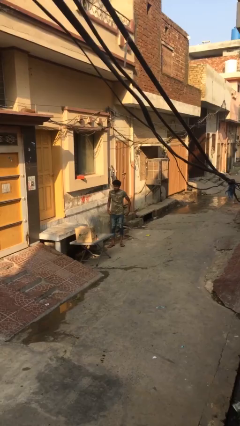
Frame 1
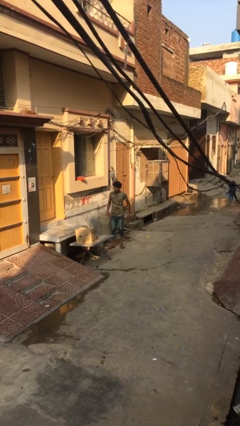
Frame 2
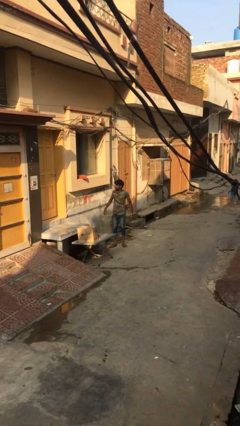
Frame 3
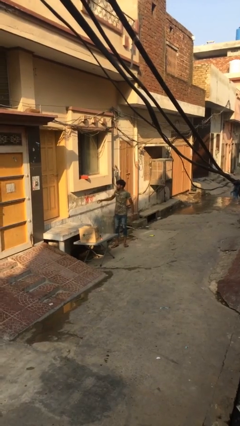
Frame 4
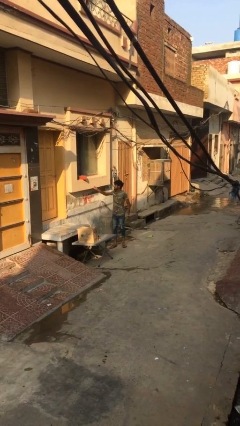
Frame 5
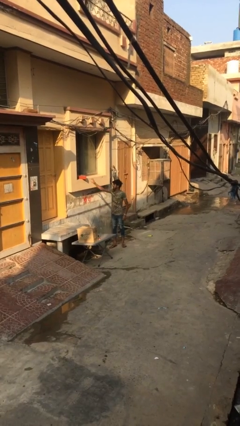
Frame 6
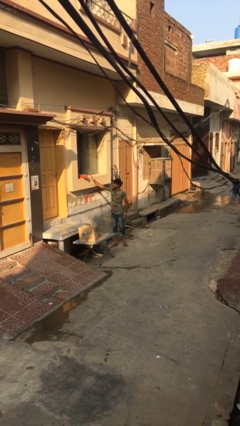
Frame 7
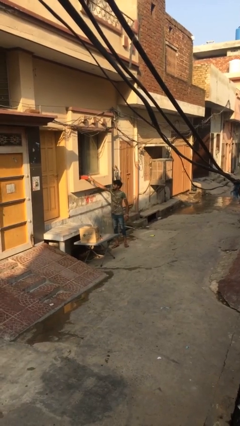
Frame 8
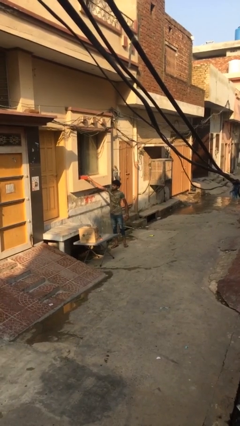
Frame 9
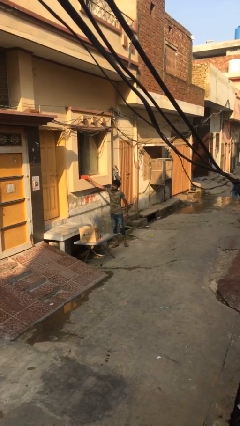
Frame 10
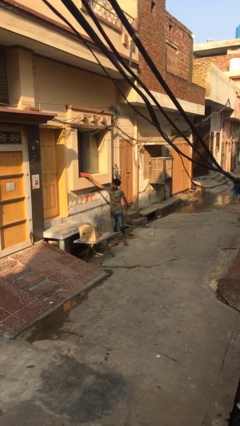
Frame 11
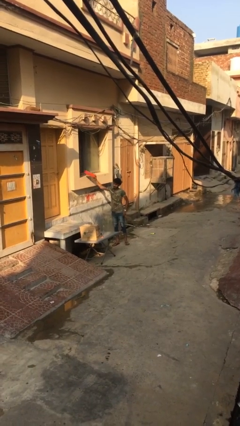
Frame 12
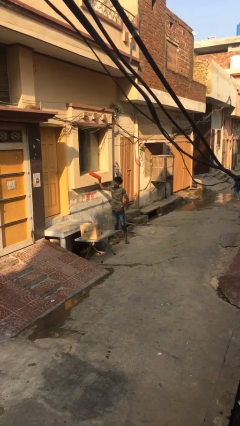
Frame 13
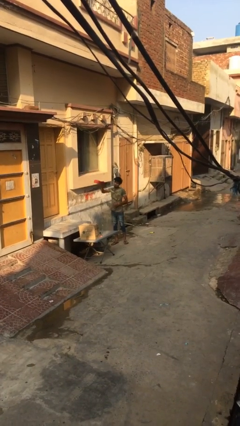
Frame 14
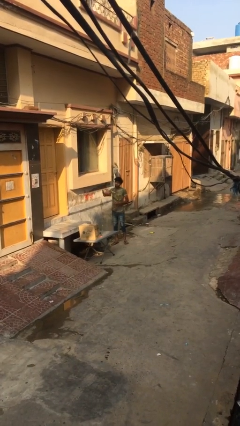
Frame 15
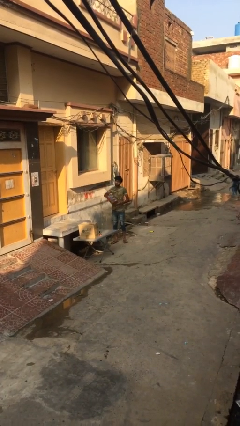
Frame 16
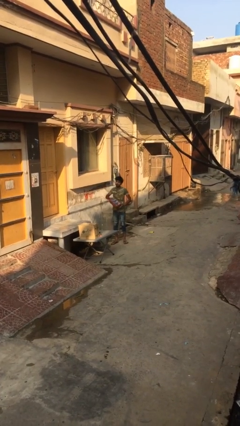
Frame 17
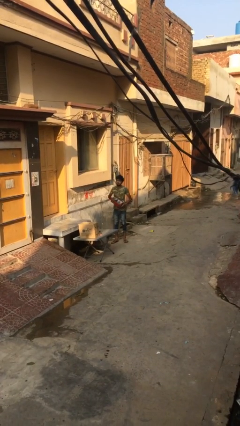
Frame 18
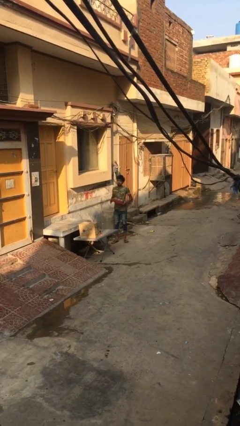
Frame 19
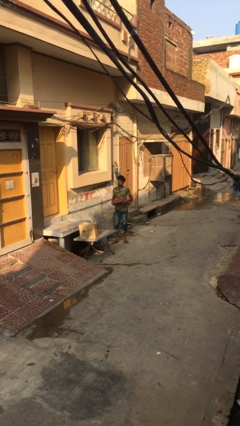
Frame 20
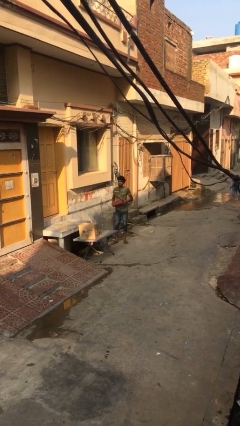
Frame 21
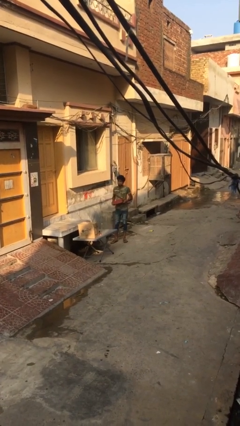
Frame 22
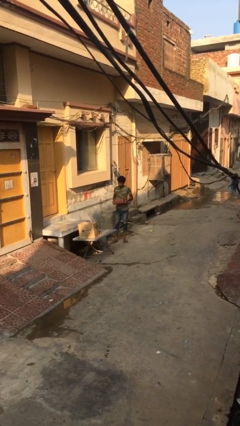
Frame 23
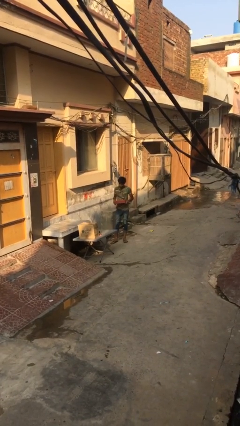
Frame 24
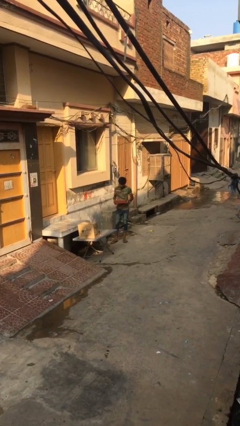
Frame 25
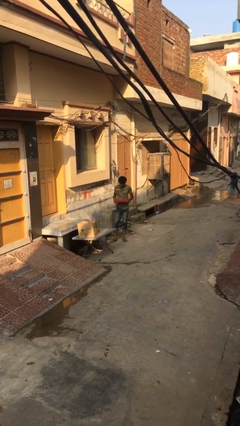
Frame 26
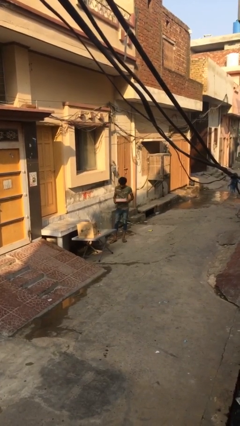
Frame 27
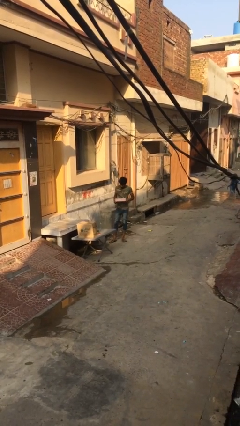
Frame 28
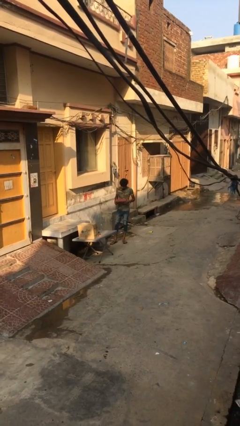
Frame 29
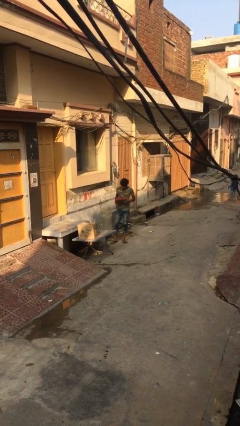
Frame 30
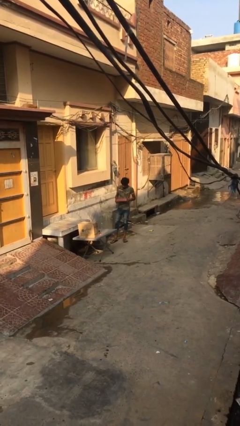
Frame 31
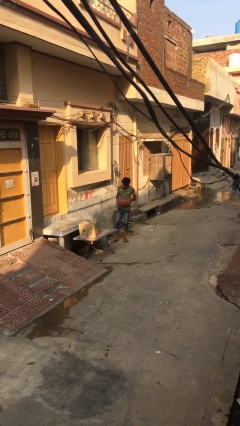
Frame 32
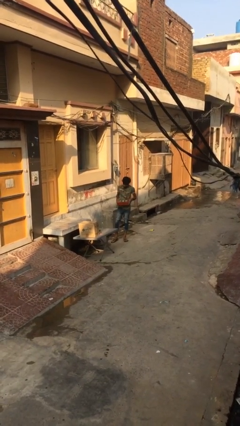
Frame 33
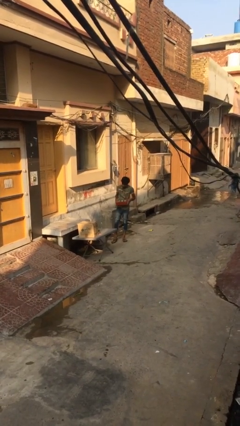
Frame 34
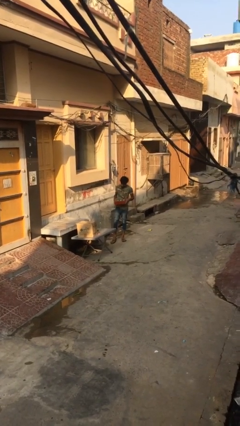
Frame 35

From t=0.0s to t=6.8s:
person picks up object from shelf

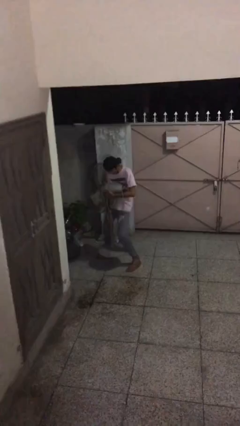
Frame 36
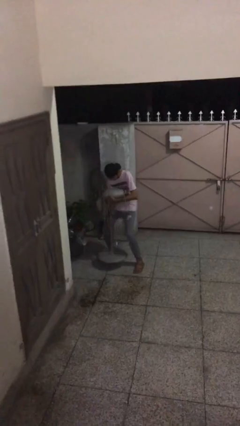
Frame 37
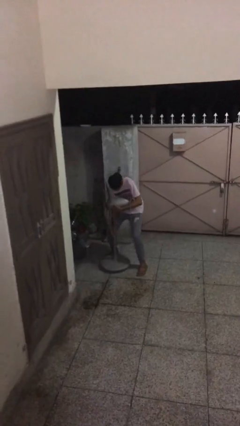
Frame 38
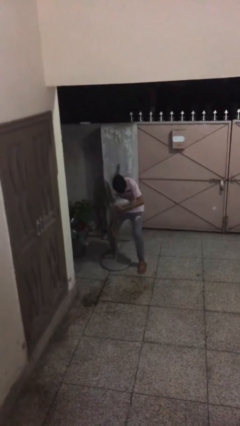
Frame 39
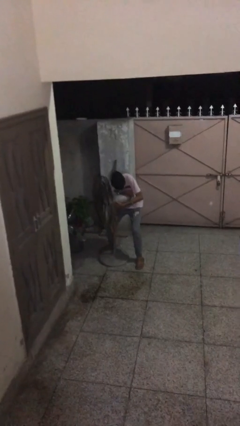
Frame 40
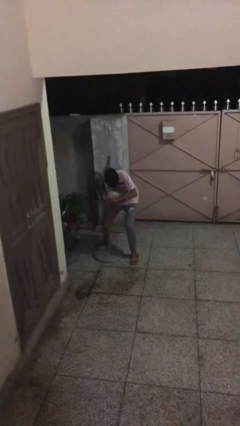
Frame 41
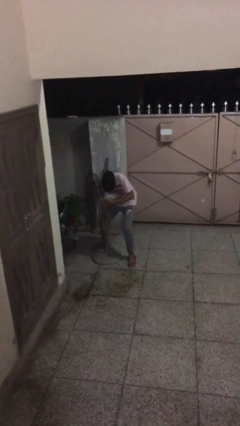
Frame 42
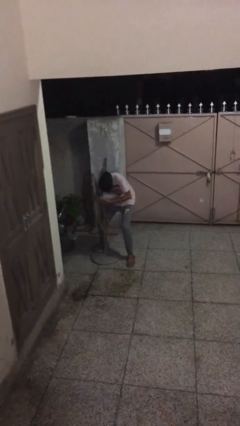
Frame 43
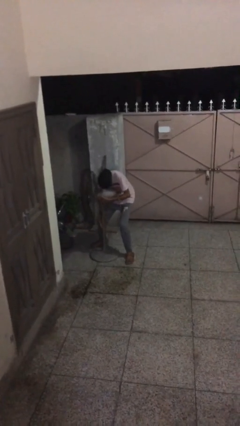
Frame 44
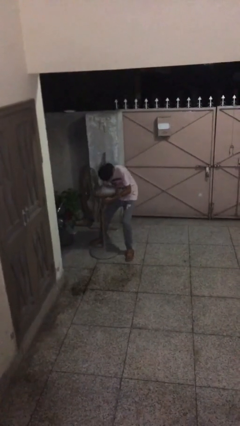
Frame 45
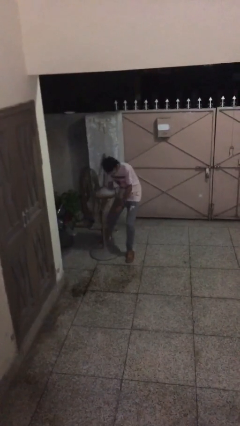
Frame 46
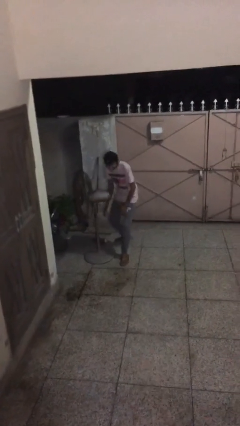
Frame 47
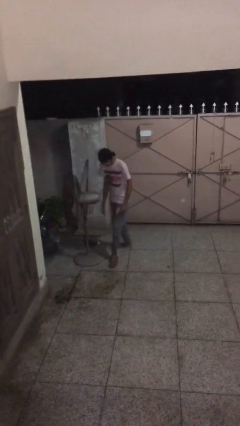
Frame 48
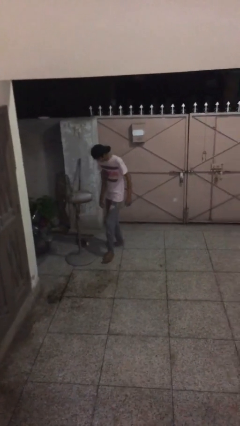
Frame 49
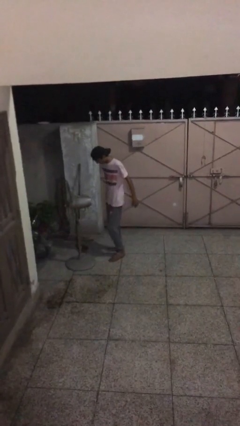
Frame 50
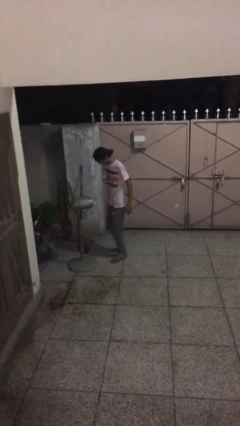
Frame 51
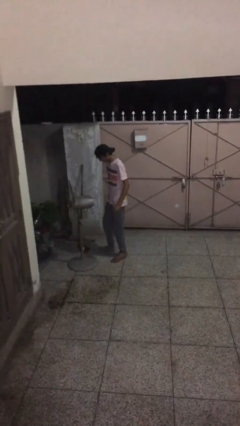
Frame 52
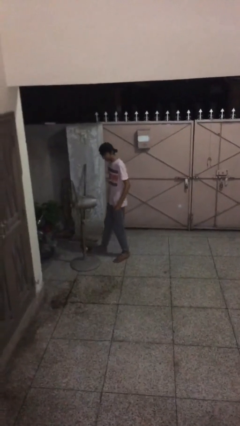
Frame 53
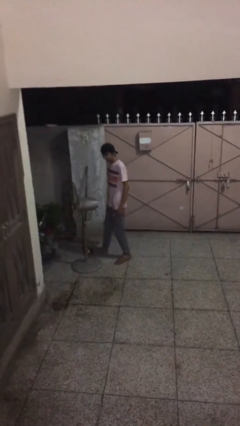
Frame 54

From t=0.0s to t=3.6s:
person puts down object on floor

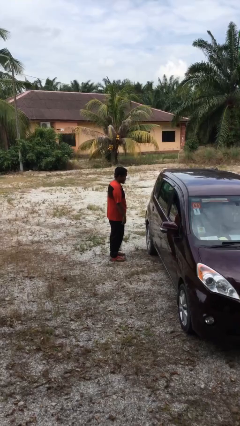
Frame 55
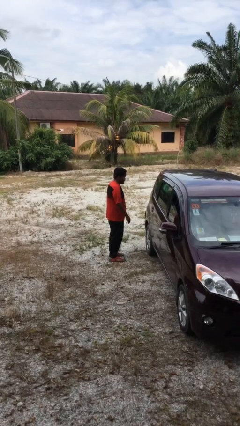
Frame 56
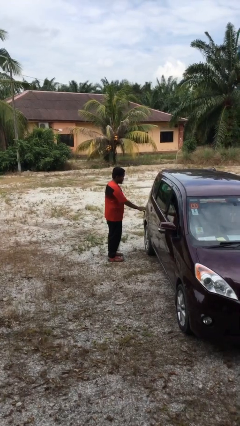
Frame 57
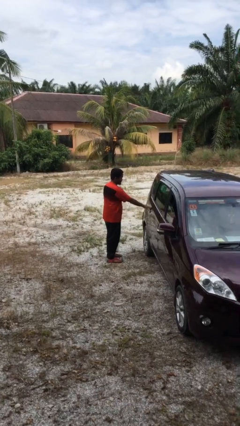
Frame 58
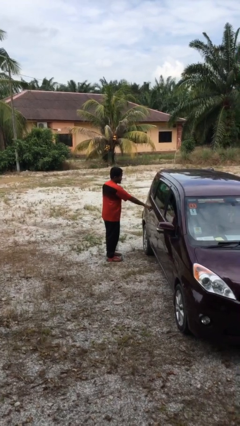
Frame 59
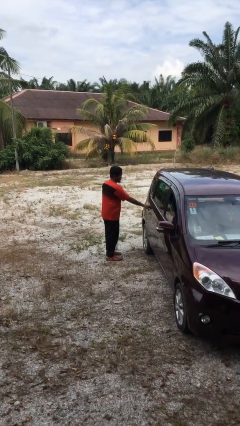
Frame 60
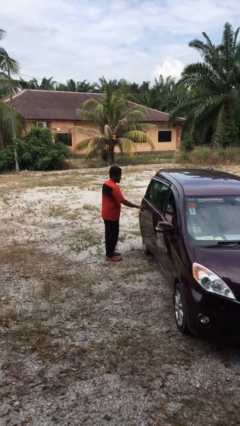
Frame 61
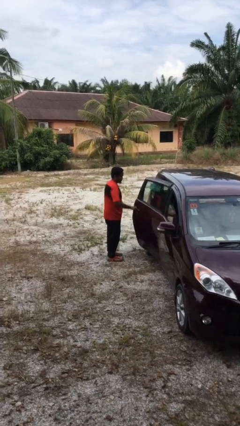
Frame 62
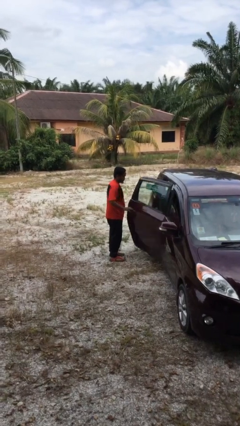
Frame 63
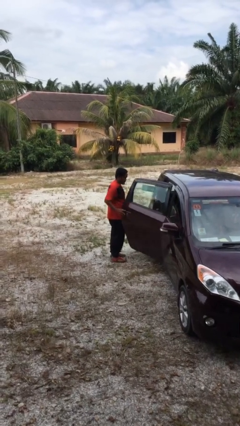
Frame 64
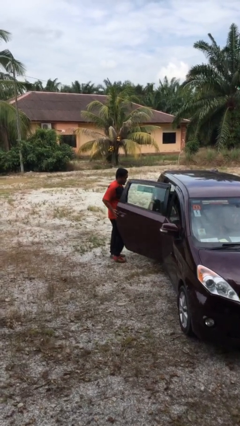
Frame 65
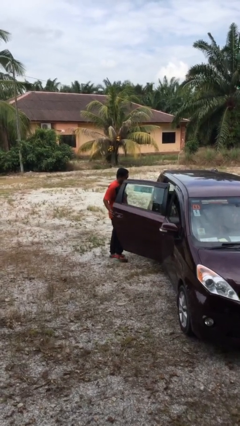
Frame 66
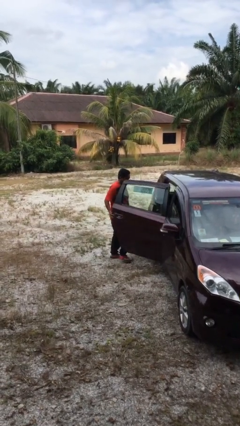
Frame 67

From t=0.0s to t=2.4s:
person opens car door

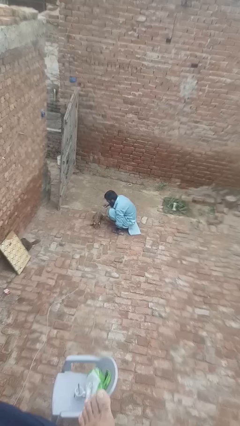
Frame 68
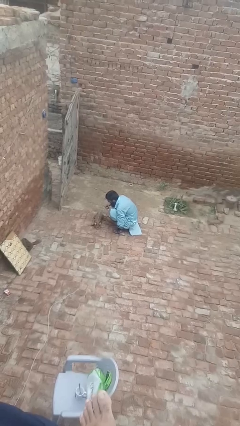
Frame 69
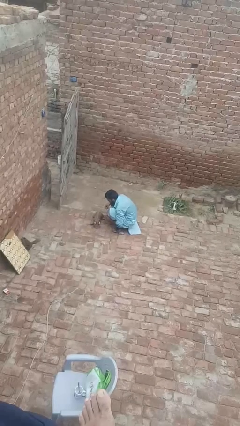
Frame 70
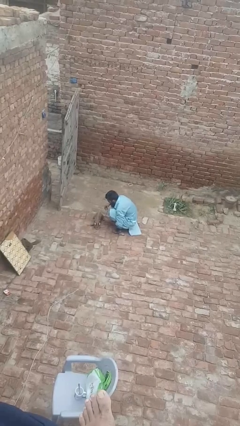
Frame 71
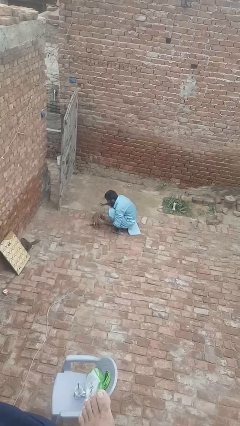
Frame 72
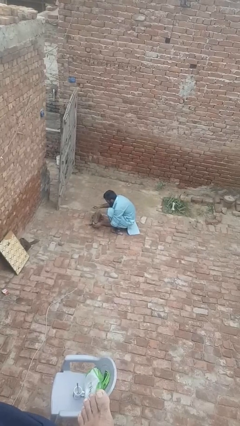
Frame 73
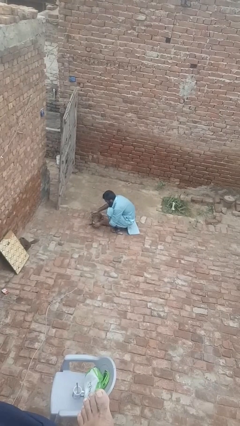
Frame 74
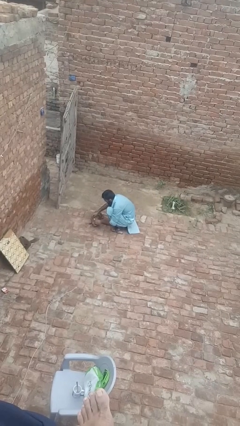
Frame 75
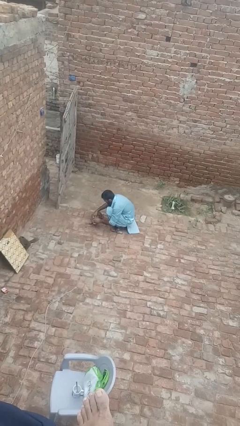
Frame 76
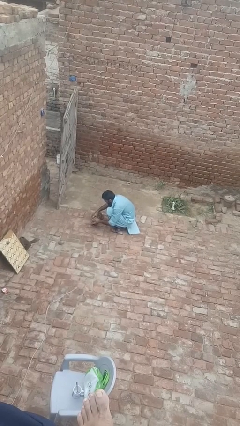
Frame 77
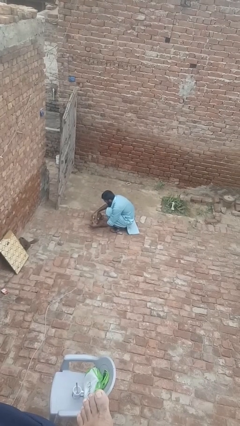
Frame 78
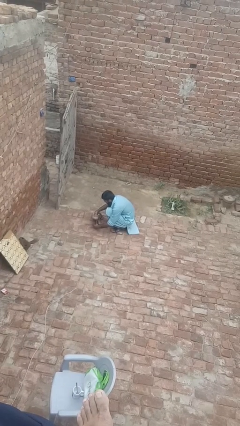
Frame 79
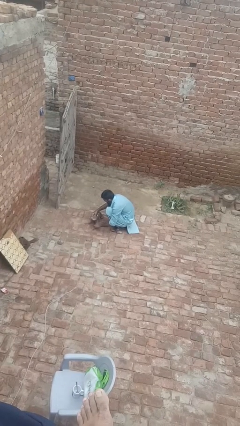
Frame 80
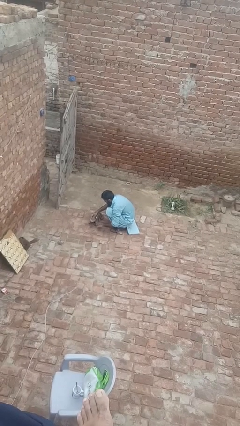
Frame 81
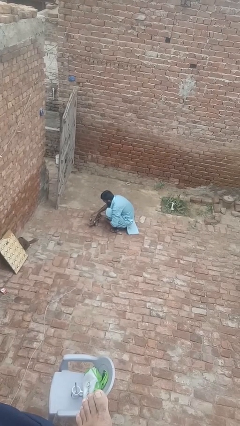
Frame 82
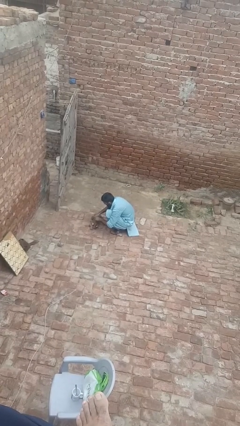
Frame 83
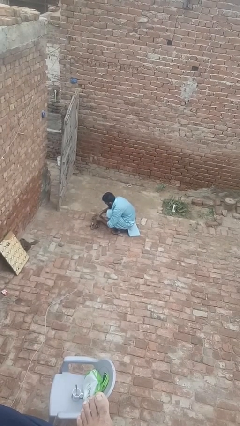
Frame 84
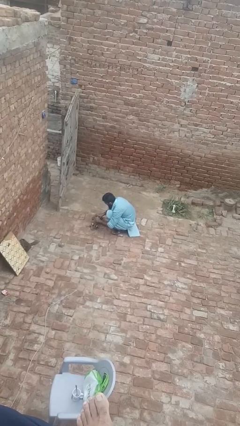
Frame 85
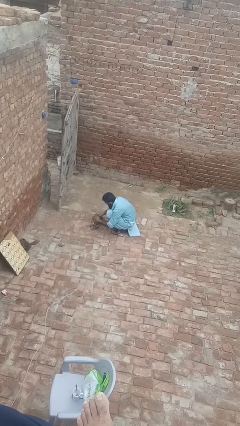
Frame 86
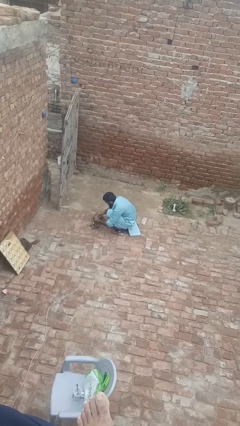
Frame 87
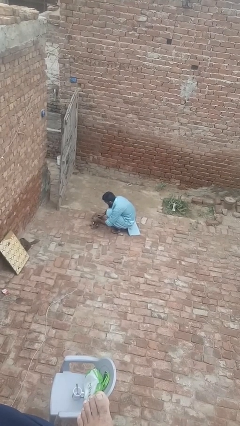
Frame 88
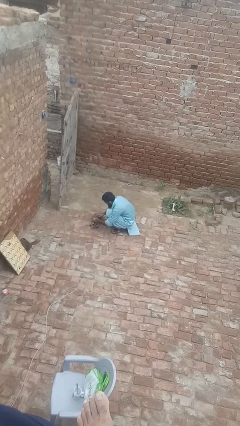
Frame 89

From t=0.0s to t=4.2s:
person attaches leash to dog

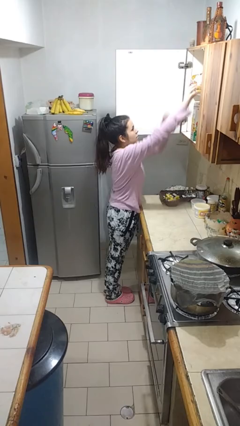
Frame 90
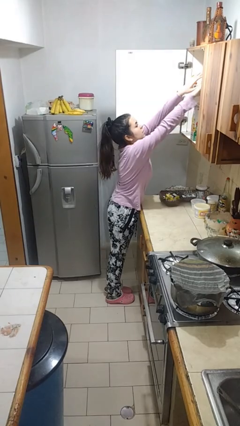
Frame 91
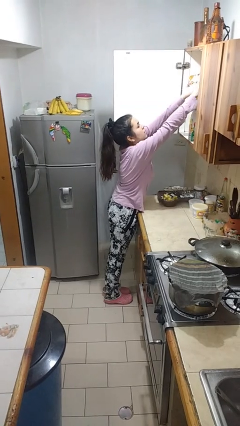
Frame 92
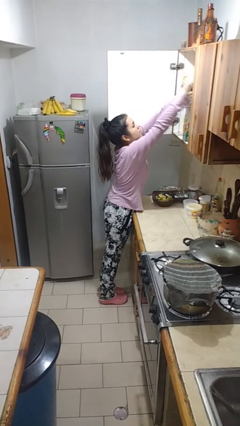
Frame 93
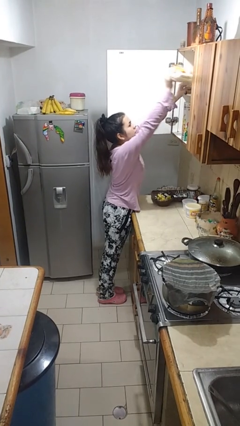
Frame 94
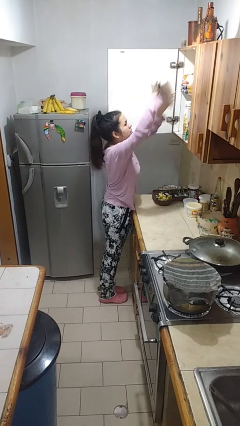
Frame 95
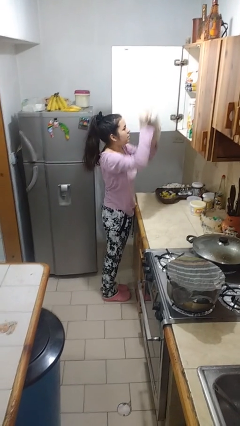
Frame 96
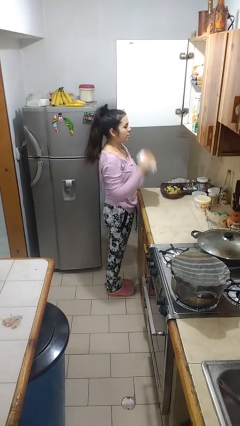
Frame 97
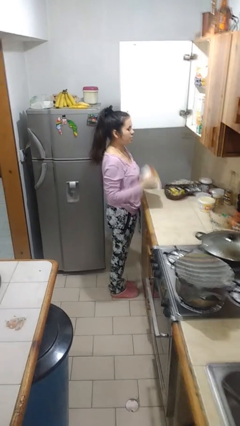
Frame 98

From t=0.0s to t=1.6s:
person takes object from cabinet
